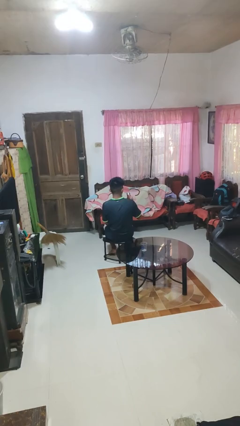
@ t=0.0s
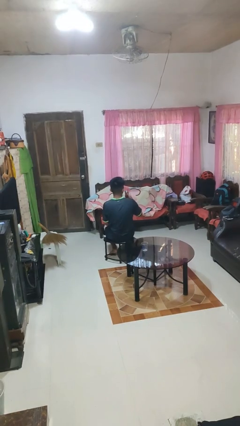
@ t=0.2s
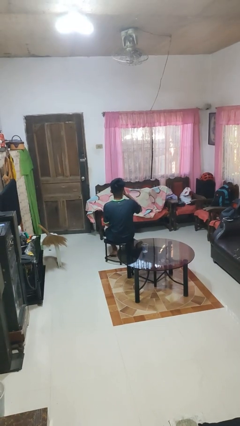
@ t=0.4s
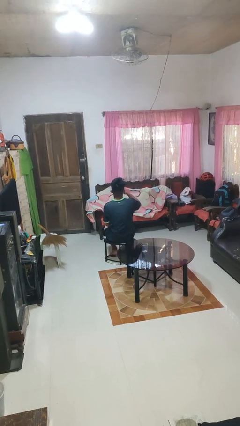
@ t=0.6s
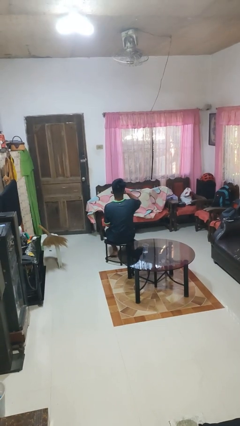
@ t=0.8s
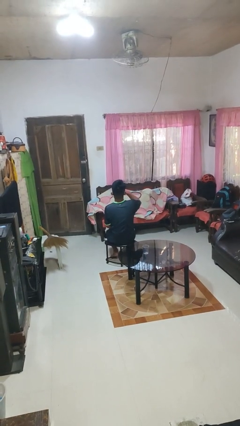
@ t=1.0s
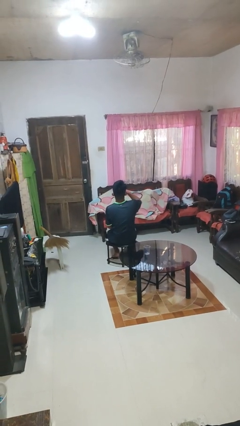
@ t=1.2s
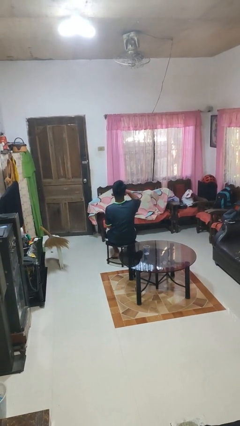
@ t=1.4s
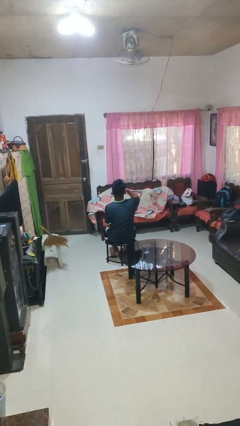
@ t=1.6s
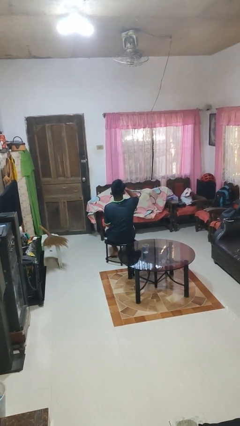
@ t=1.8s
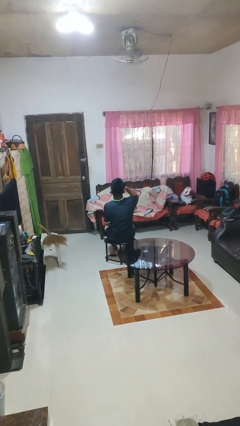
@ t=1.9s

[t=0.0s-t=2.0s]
person drinks from beverage can

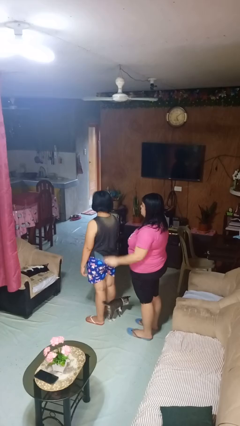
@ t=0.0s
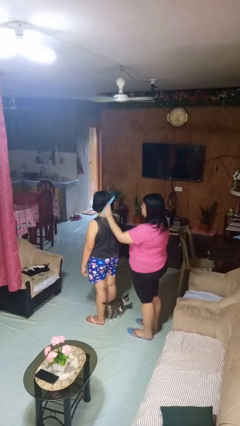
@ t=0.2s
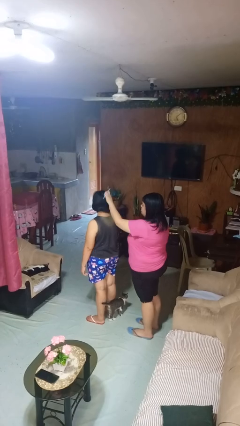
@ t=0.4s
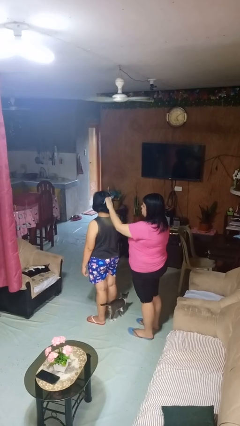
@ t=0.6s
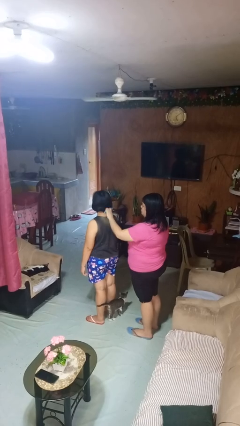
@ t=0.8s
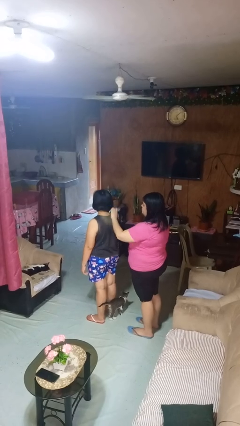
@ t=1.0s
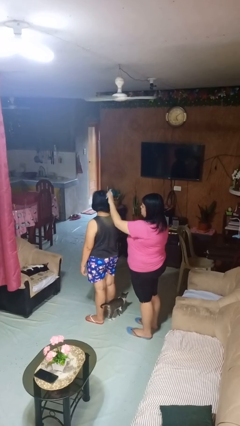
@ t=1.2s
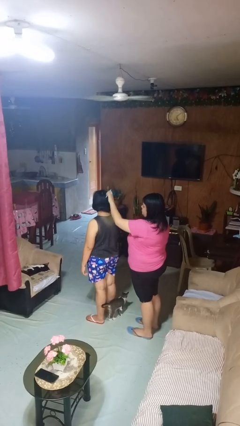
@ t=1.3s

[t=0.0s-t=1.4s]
person brushes hair of person

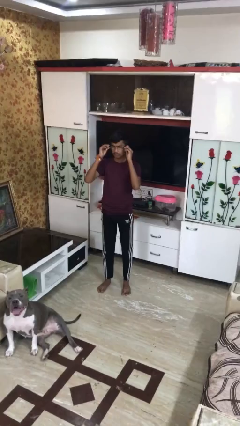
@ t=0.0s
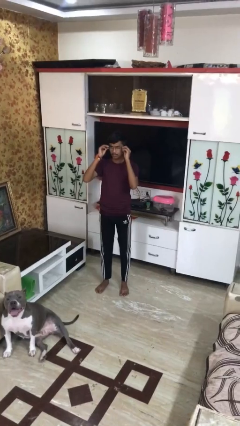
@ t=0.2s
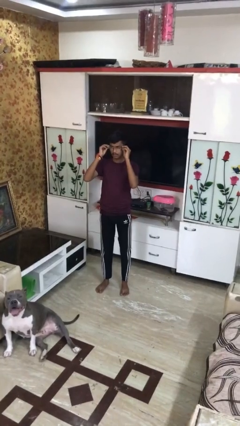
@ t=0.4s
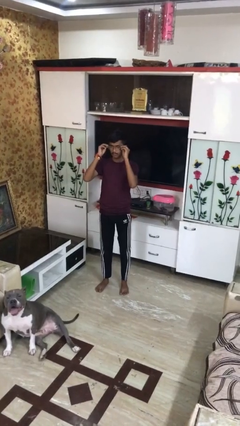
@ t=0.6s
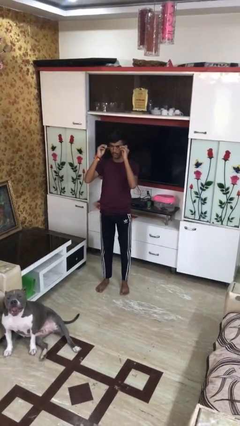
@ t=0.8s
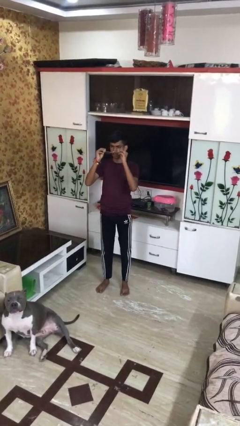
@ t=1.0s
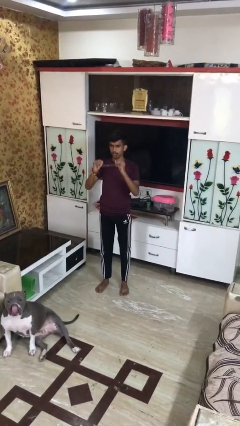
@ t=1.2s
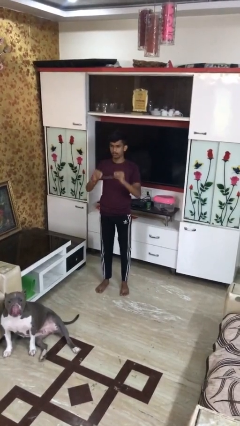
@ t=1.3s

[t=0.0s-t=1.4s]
person takes off glasses

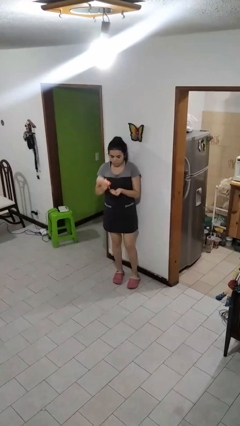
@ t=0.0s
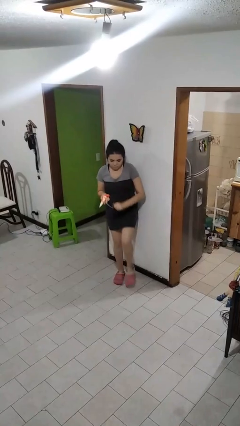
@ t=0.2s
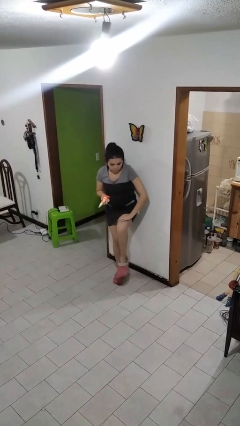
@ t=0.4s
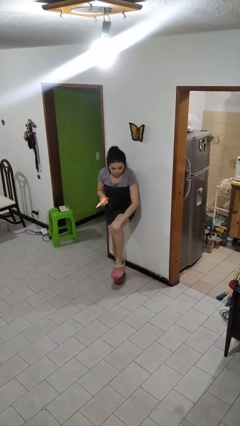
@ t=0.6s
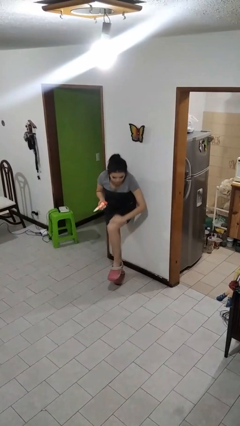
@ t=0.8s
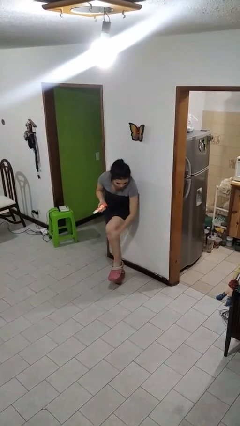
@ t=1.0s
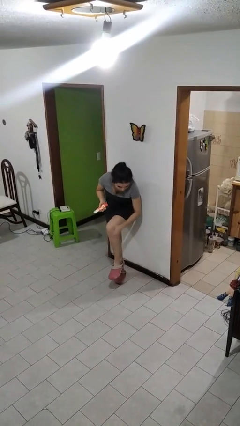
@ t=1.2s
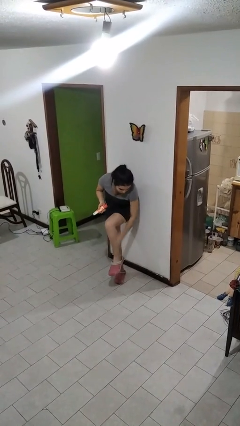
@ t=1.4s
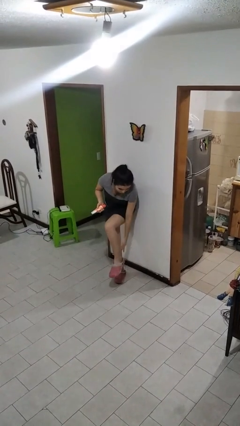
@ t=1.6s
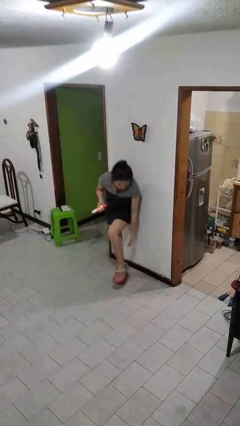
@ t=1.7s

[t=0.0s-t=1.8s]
person applies sunscreen

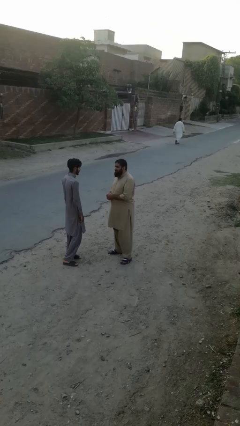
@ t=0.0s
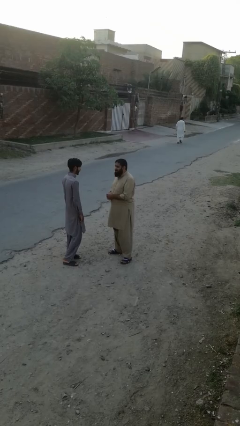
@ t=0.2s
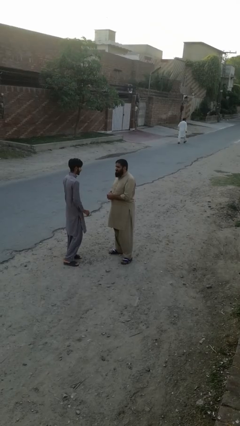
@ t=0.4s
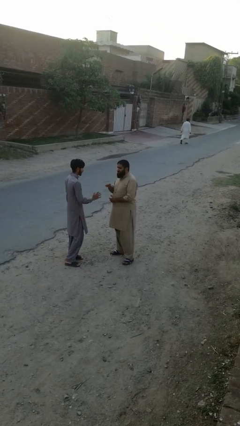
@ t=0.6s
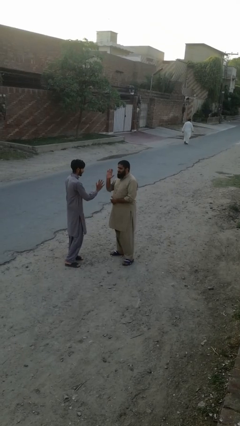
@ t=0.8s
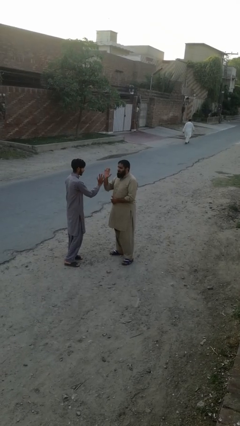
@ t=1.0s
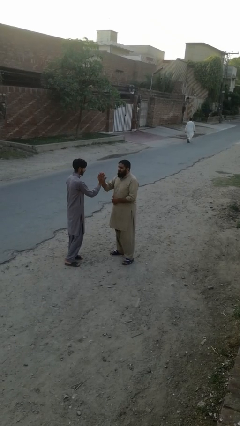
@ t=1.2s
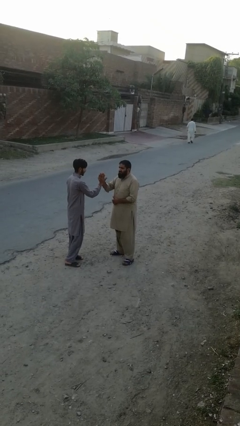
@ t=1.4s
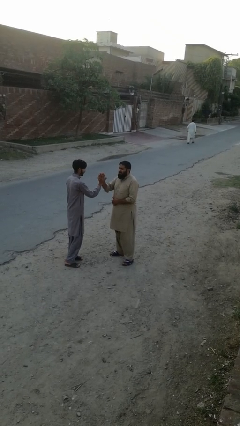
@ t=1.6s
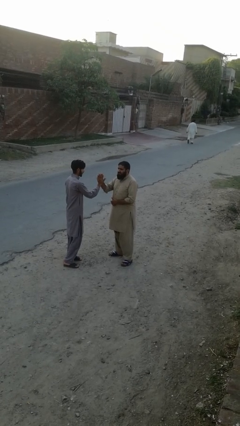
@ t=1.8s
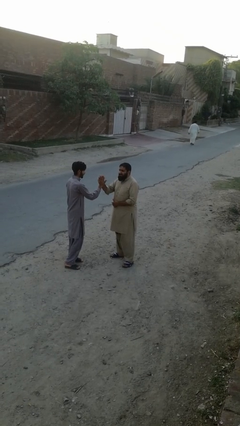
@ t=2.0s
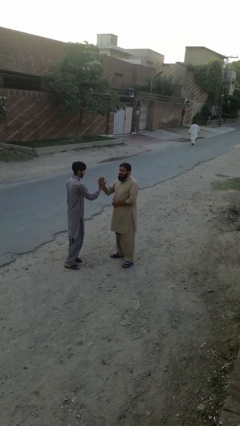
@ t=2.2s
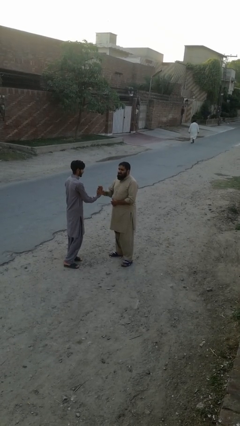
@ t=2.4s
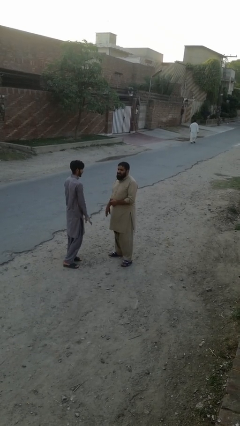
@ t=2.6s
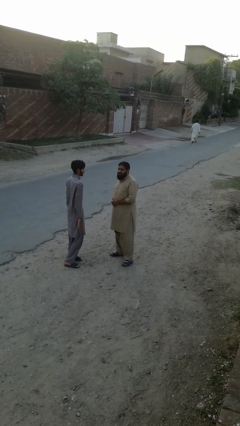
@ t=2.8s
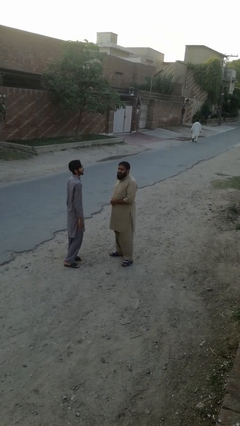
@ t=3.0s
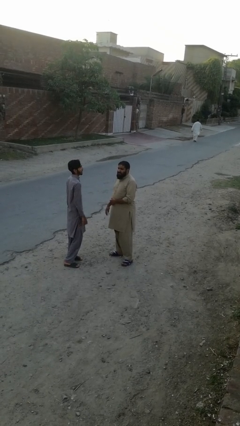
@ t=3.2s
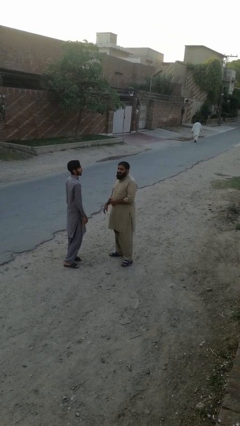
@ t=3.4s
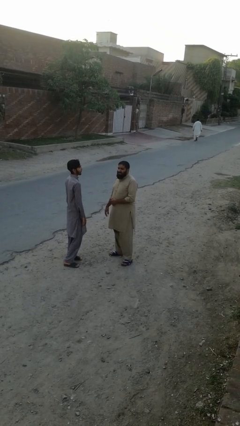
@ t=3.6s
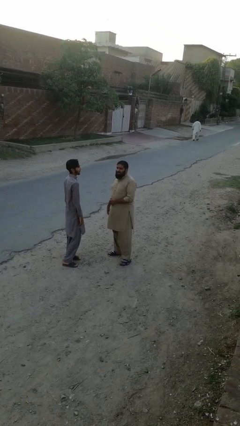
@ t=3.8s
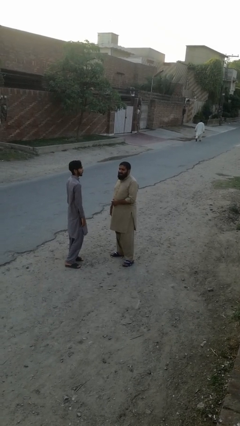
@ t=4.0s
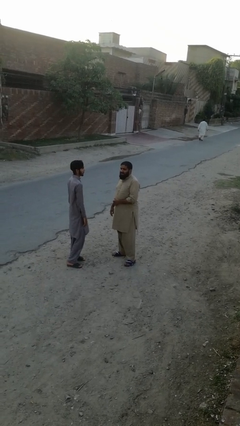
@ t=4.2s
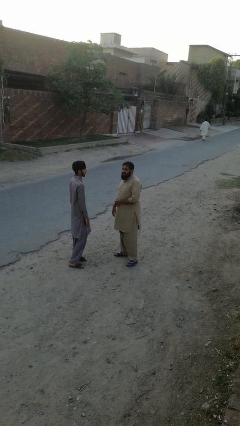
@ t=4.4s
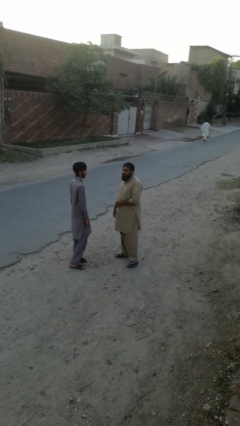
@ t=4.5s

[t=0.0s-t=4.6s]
person highfives hand

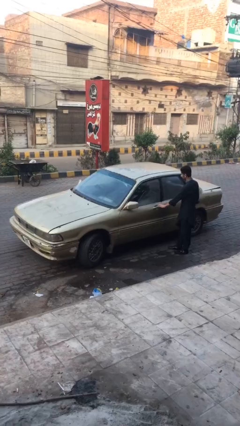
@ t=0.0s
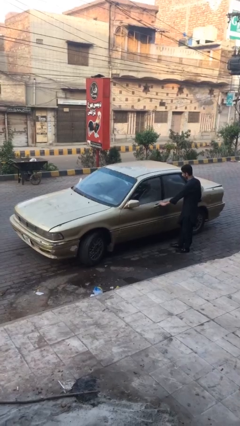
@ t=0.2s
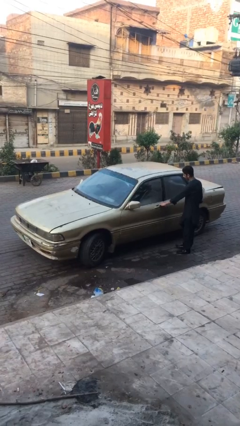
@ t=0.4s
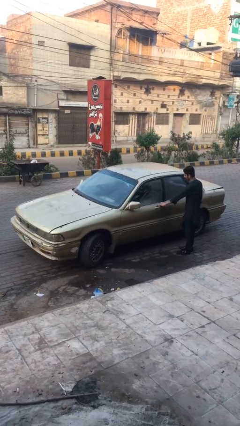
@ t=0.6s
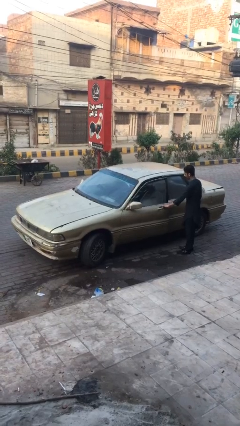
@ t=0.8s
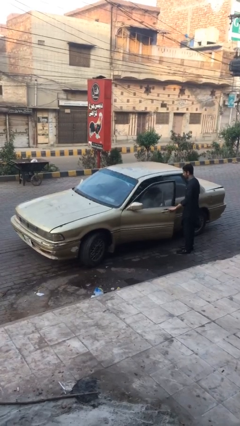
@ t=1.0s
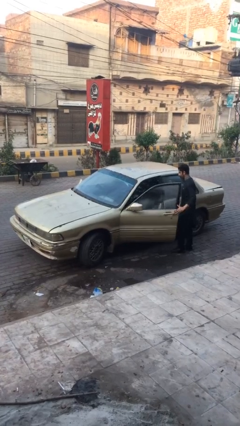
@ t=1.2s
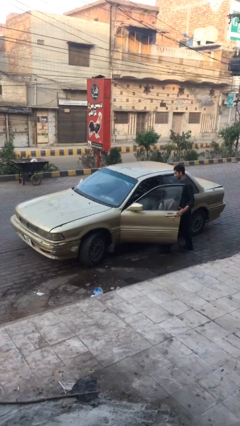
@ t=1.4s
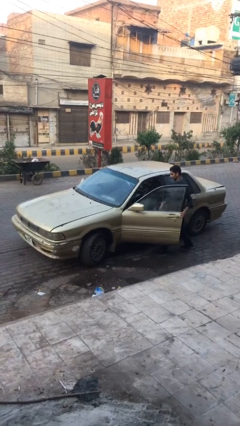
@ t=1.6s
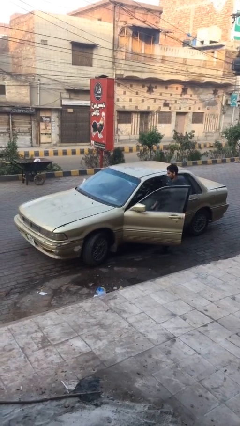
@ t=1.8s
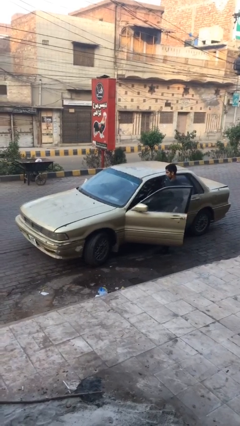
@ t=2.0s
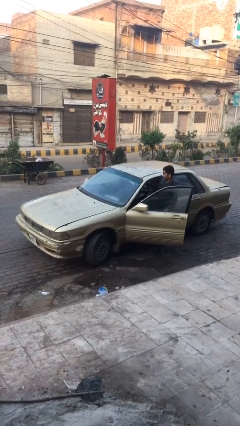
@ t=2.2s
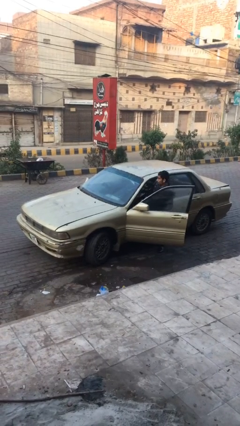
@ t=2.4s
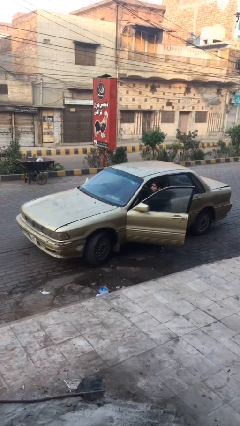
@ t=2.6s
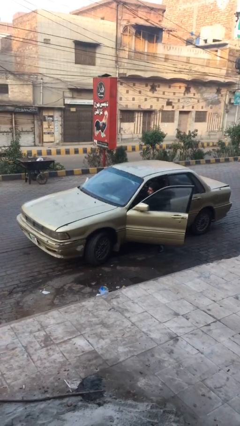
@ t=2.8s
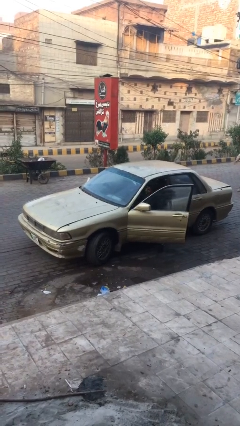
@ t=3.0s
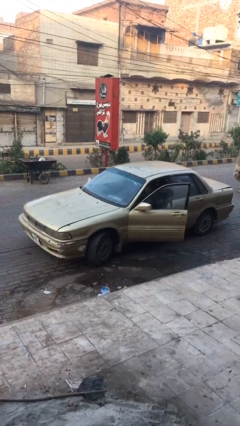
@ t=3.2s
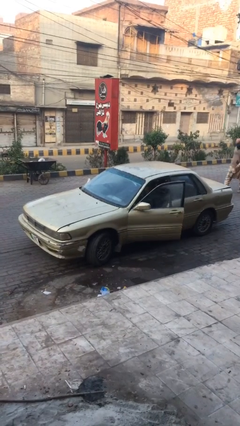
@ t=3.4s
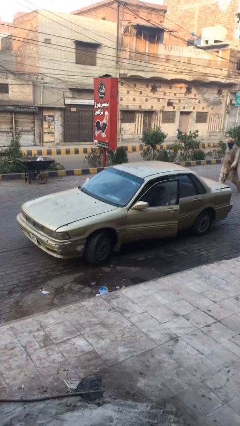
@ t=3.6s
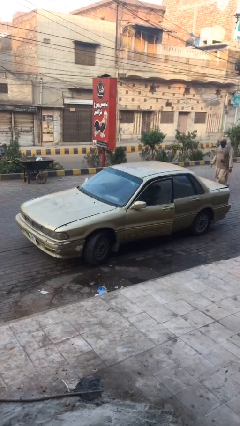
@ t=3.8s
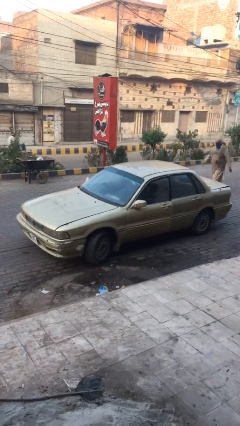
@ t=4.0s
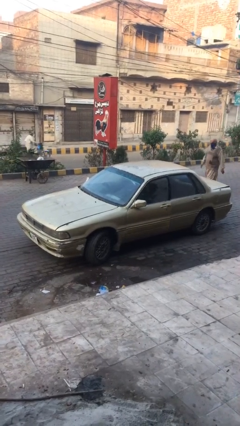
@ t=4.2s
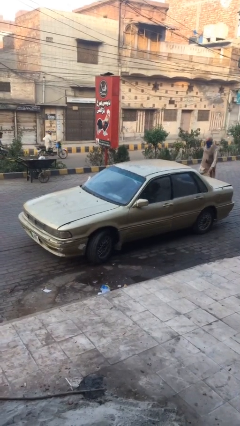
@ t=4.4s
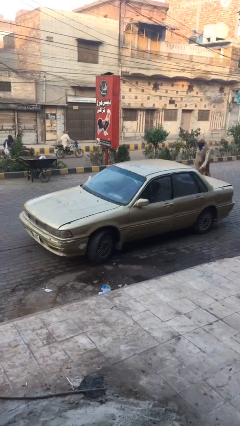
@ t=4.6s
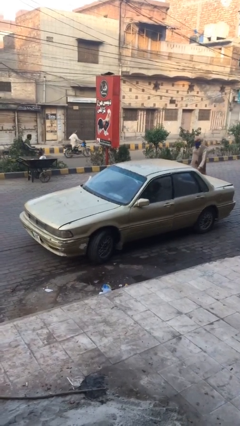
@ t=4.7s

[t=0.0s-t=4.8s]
car picks up person

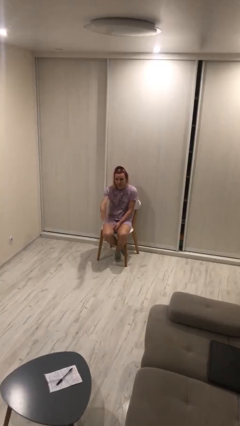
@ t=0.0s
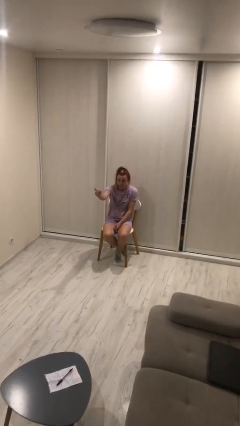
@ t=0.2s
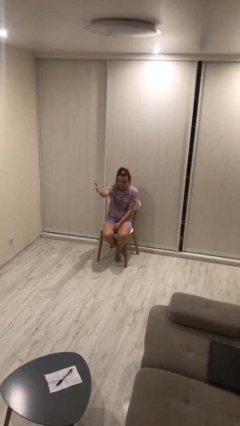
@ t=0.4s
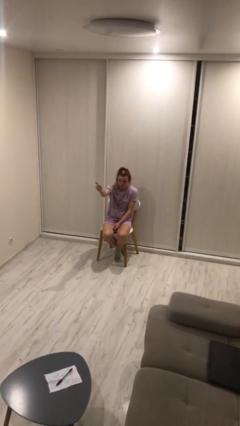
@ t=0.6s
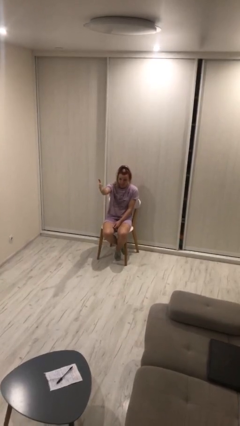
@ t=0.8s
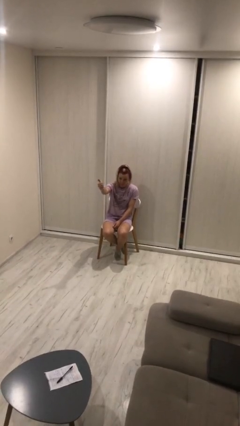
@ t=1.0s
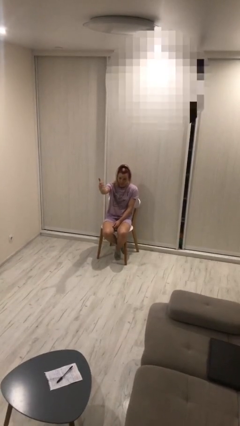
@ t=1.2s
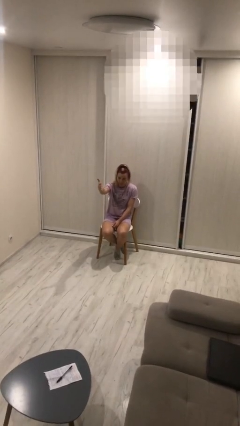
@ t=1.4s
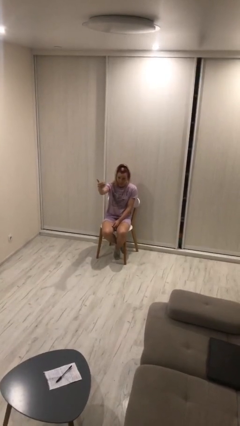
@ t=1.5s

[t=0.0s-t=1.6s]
person gestures come here
